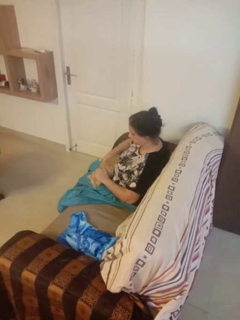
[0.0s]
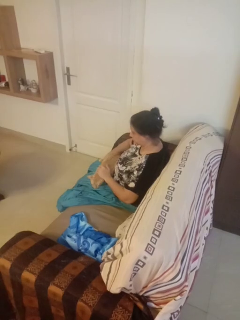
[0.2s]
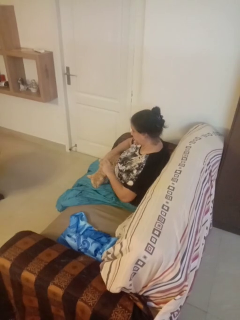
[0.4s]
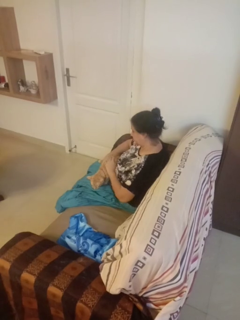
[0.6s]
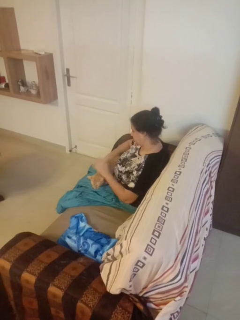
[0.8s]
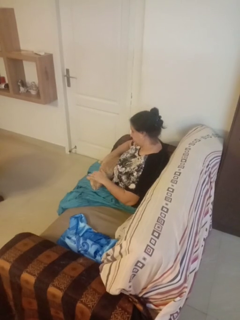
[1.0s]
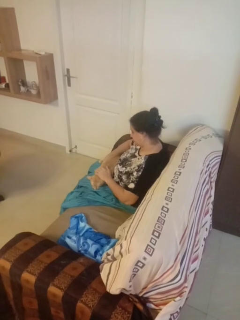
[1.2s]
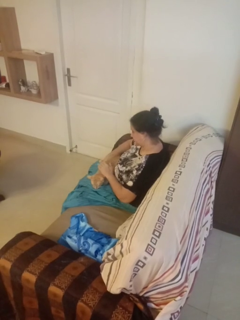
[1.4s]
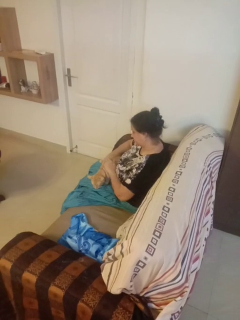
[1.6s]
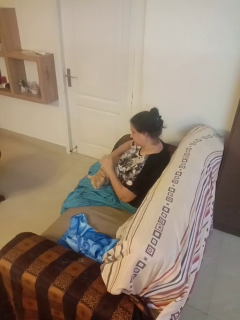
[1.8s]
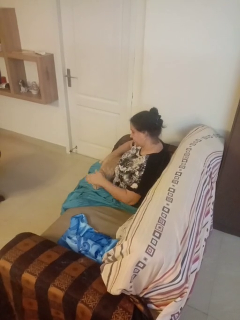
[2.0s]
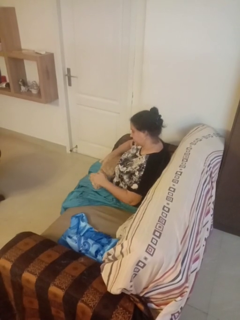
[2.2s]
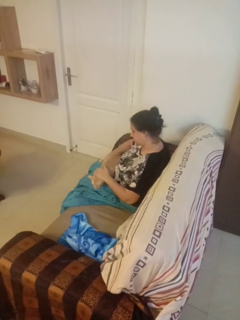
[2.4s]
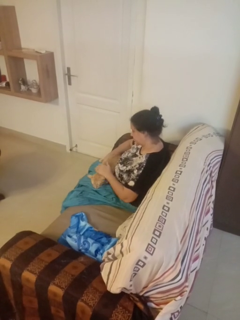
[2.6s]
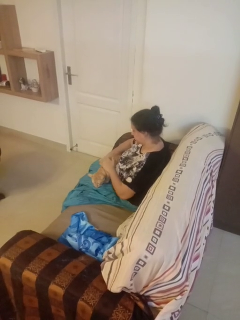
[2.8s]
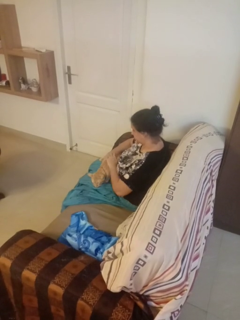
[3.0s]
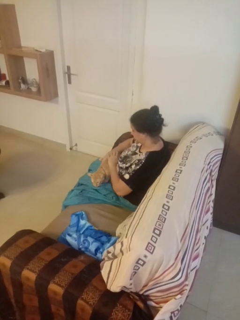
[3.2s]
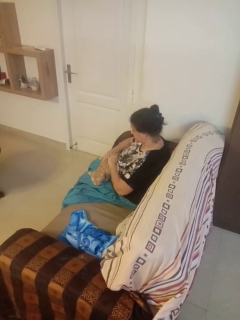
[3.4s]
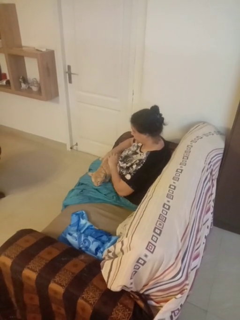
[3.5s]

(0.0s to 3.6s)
person pets cat

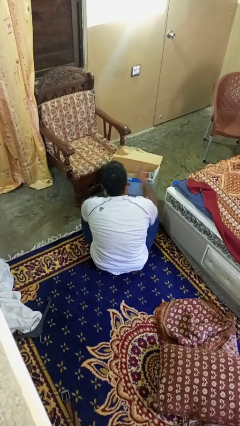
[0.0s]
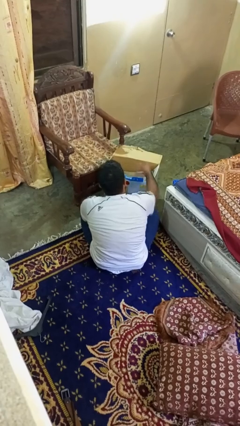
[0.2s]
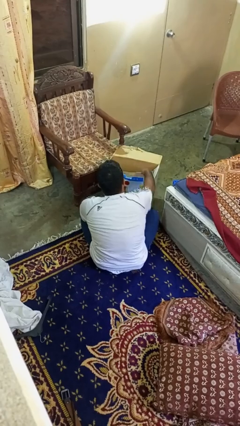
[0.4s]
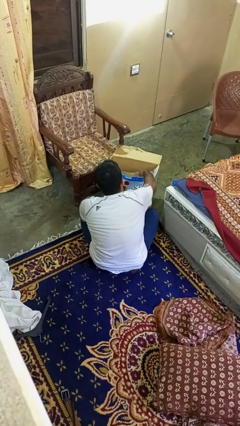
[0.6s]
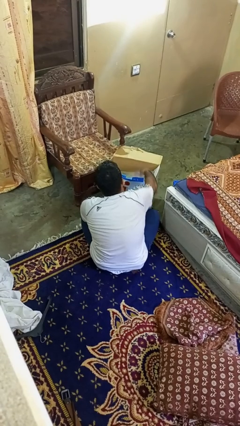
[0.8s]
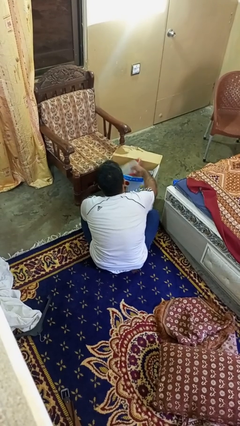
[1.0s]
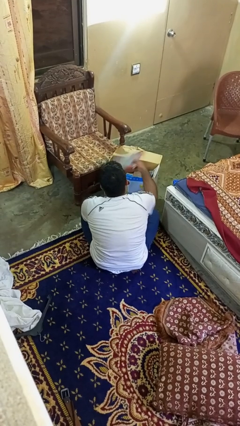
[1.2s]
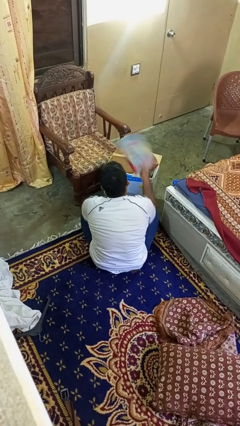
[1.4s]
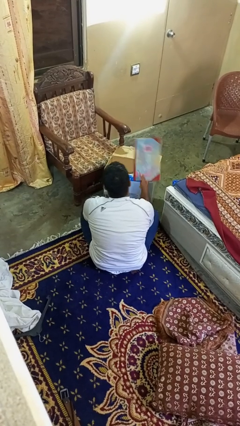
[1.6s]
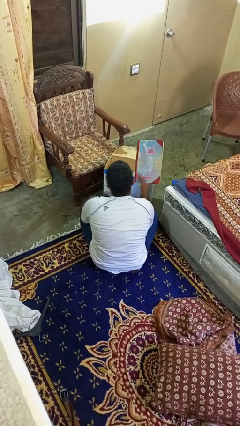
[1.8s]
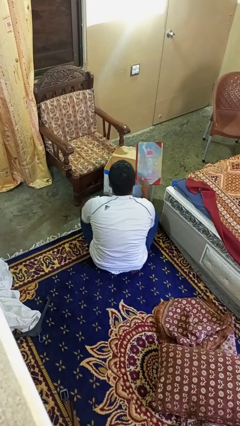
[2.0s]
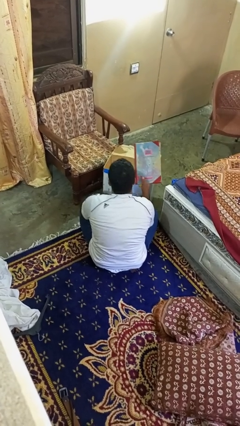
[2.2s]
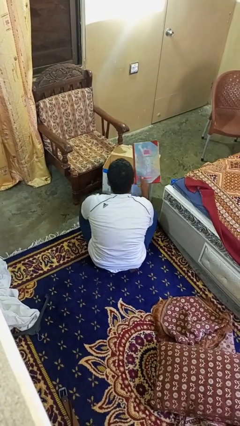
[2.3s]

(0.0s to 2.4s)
person takes object from box

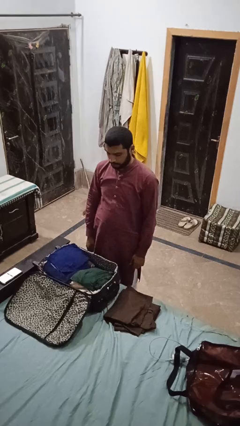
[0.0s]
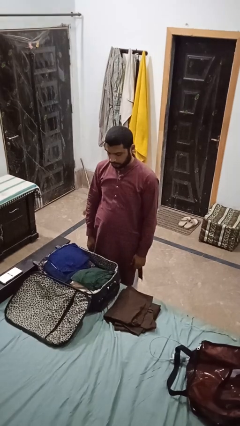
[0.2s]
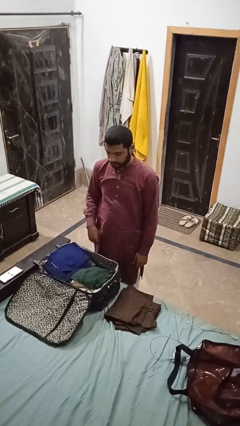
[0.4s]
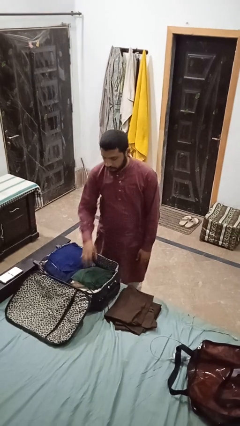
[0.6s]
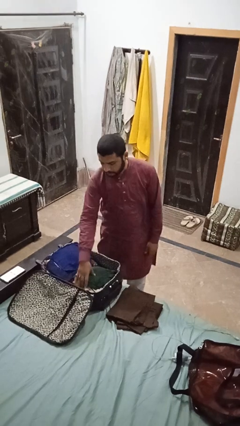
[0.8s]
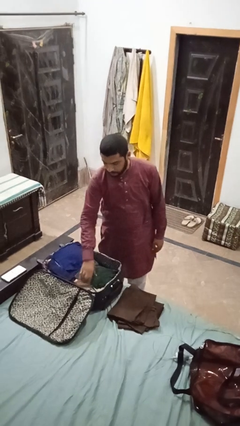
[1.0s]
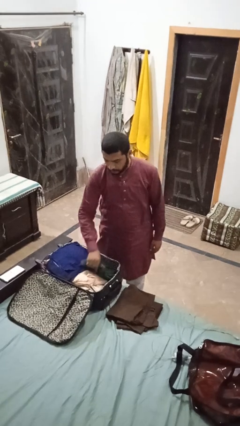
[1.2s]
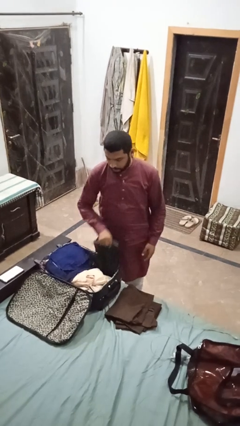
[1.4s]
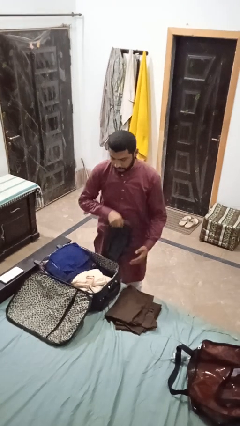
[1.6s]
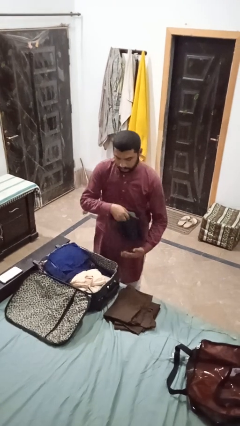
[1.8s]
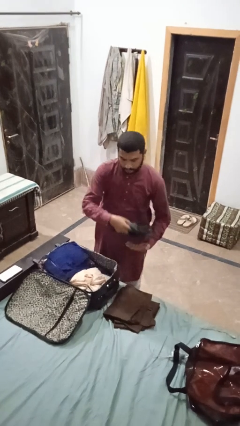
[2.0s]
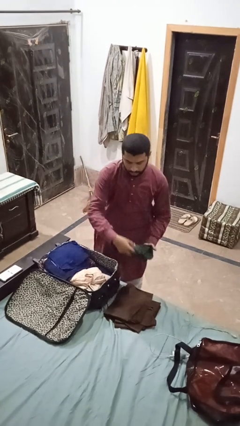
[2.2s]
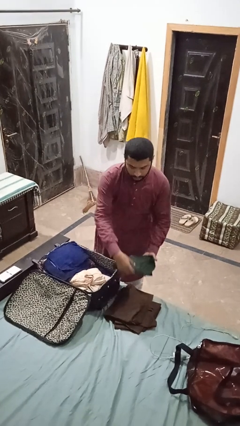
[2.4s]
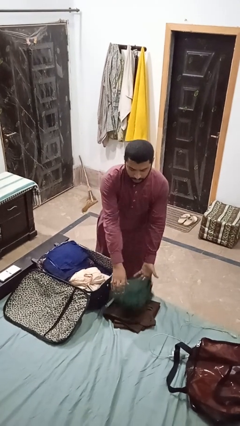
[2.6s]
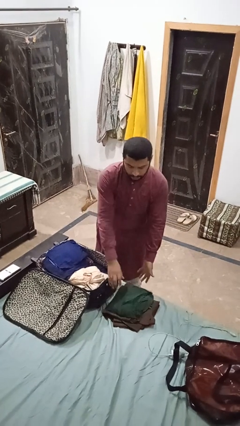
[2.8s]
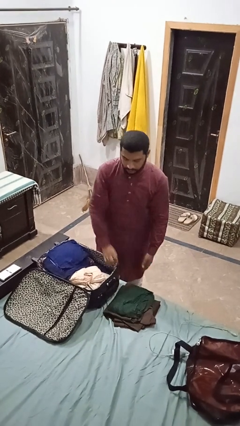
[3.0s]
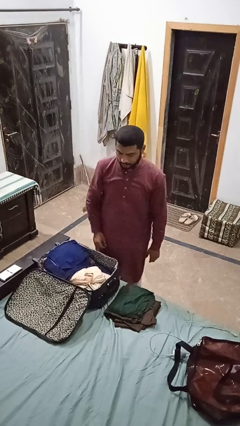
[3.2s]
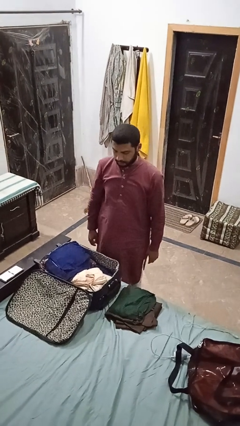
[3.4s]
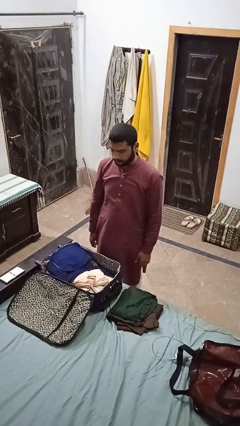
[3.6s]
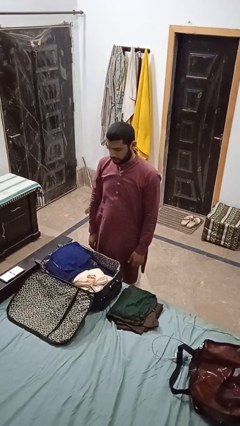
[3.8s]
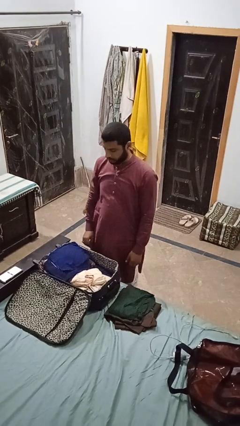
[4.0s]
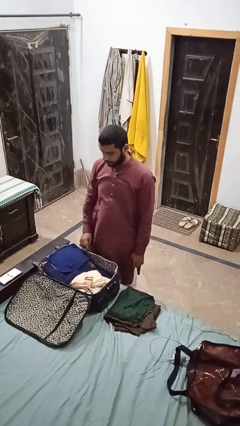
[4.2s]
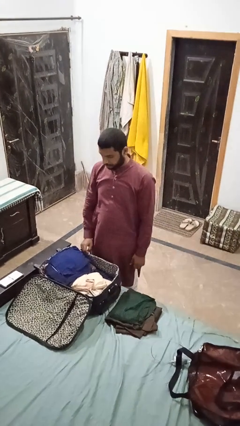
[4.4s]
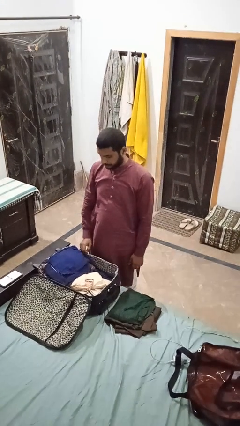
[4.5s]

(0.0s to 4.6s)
person unloads clothes from suitcase

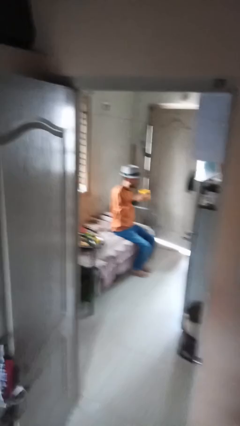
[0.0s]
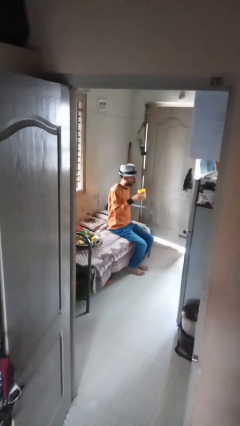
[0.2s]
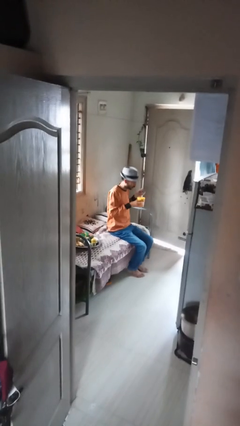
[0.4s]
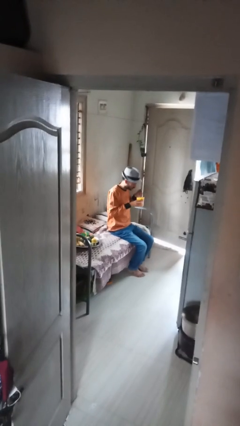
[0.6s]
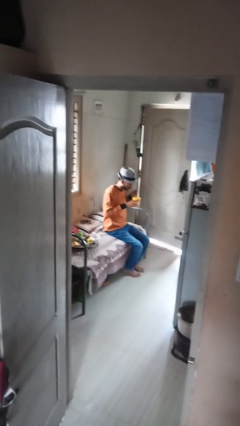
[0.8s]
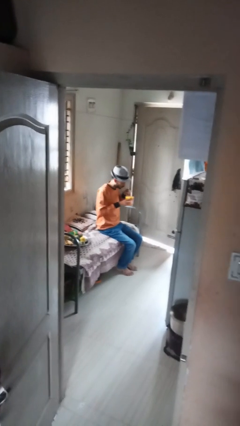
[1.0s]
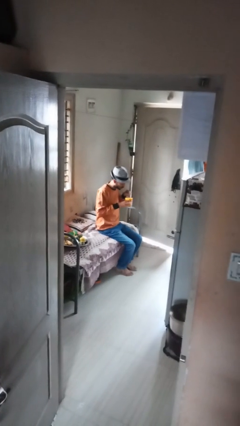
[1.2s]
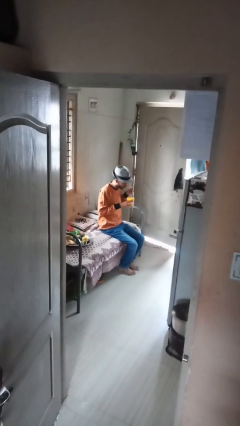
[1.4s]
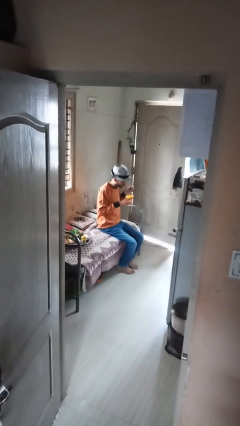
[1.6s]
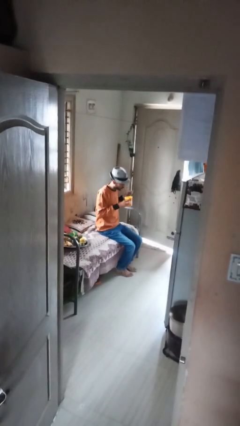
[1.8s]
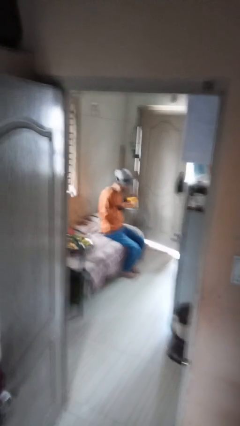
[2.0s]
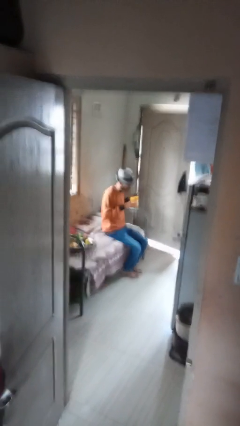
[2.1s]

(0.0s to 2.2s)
person stirs mug

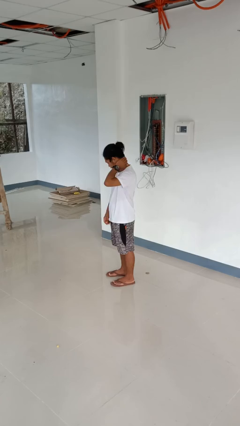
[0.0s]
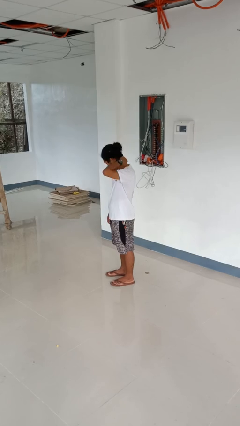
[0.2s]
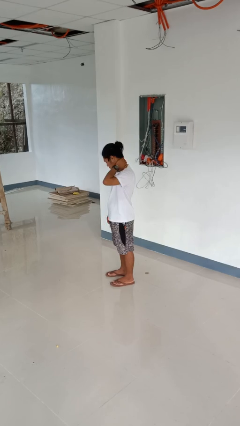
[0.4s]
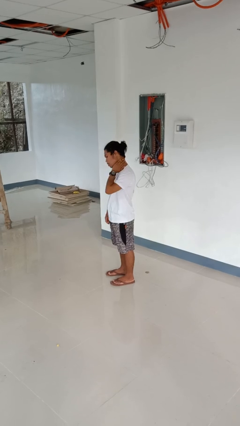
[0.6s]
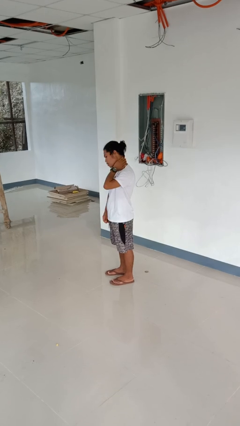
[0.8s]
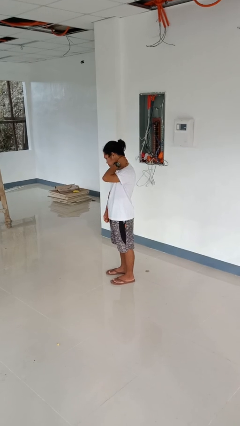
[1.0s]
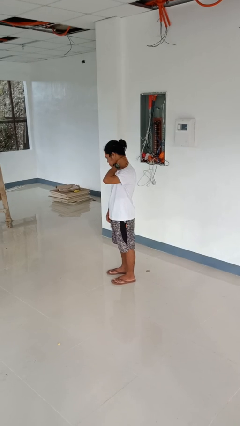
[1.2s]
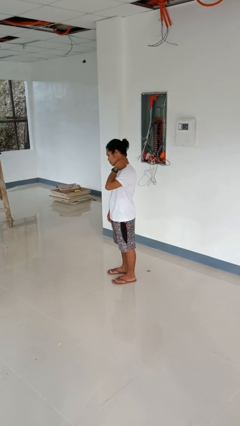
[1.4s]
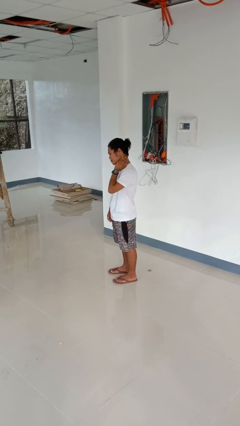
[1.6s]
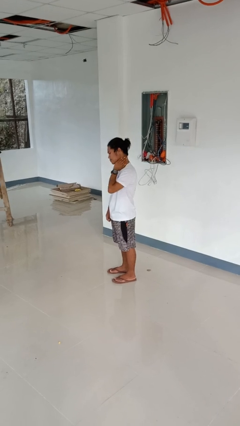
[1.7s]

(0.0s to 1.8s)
person rubs neck

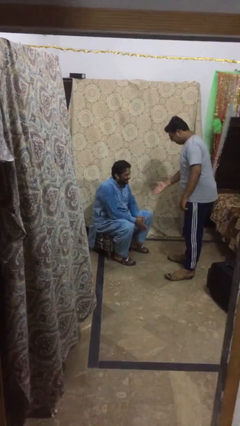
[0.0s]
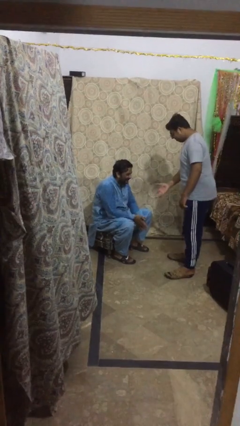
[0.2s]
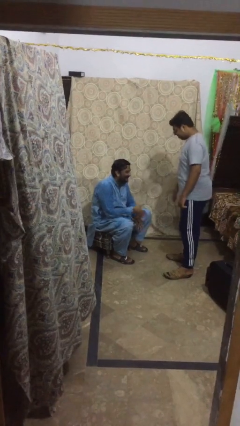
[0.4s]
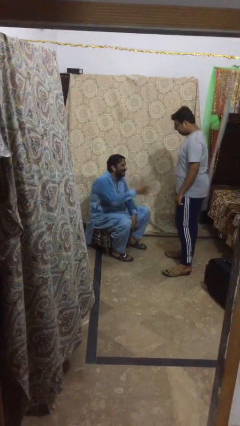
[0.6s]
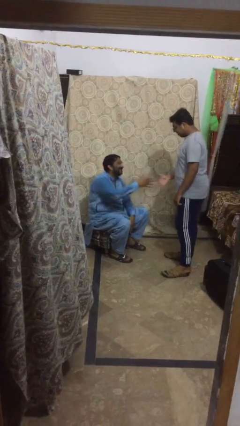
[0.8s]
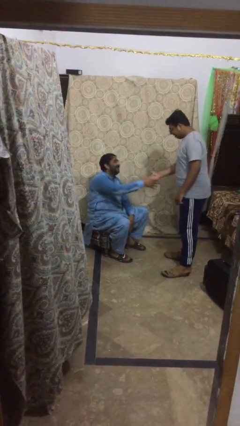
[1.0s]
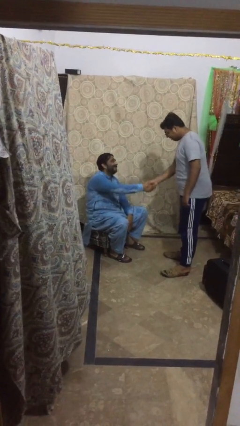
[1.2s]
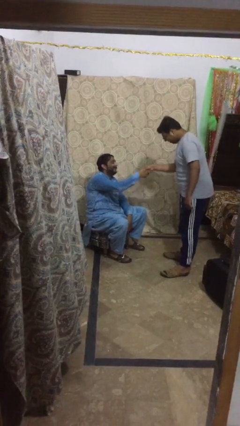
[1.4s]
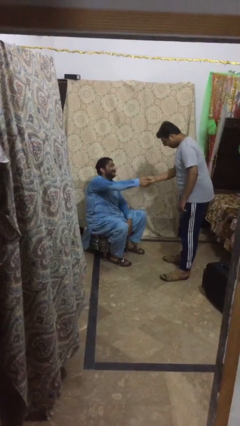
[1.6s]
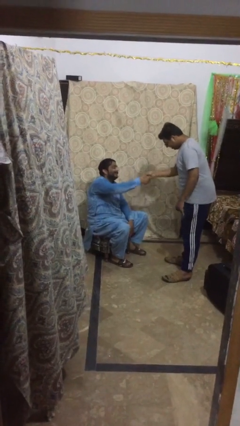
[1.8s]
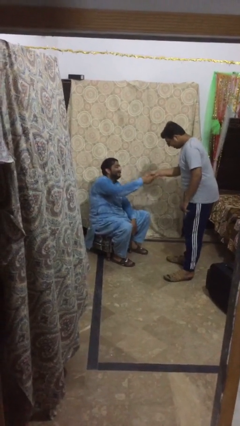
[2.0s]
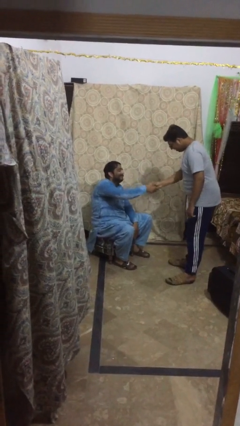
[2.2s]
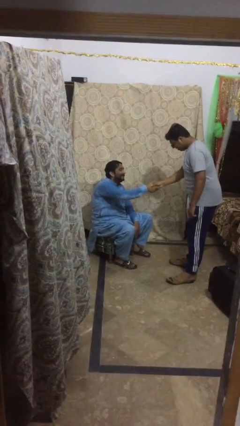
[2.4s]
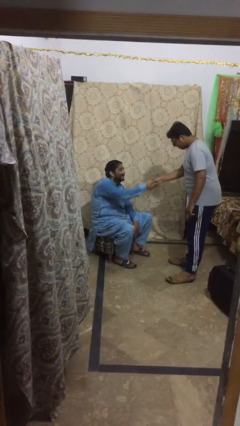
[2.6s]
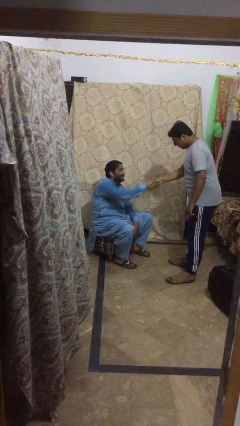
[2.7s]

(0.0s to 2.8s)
person shakes hand

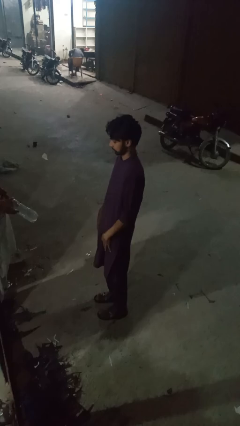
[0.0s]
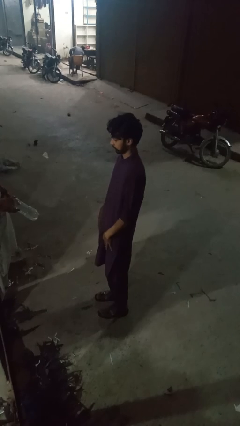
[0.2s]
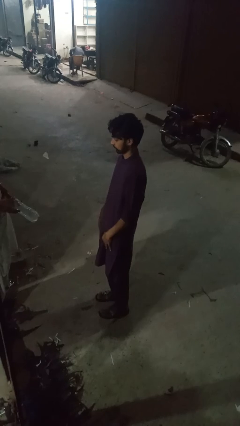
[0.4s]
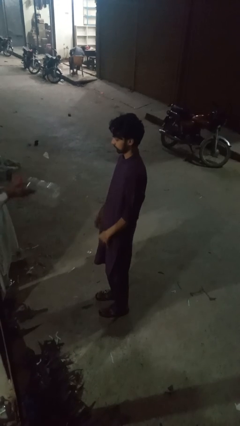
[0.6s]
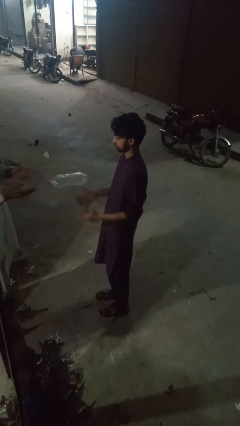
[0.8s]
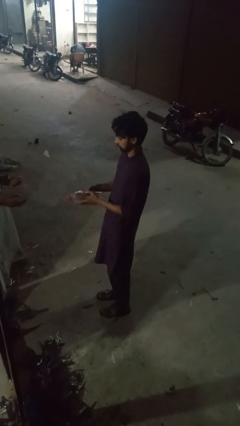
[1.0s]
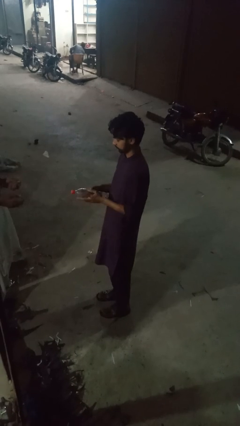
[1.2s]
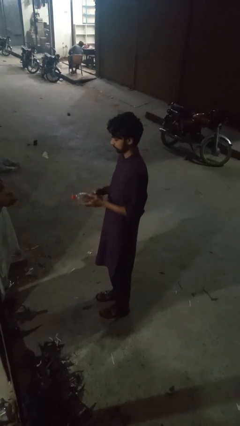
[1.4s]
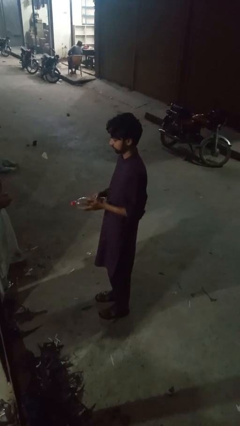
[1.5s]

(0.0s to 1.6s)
person catches object from person
